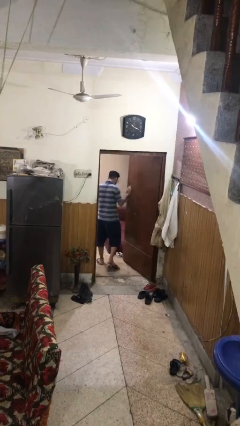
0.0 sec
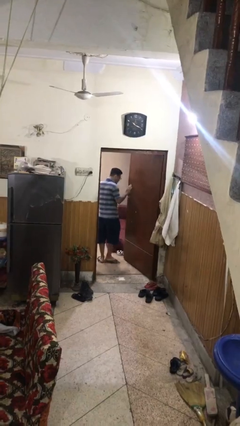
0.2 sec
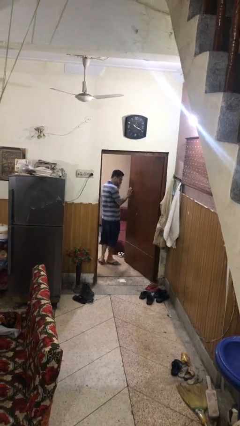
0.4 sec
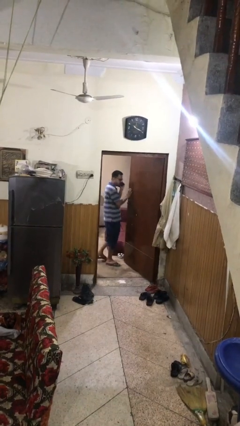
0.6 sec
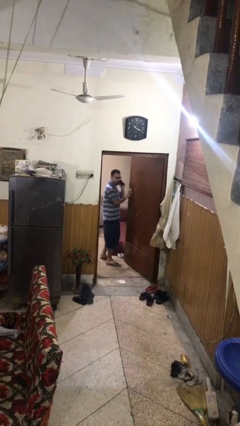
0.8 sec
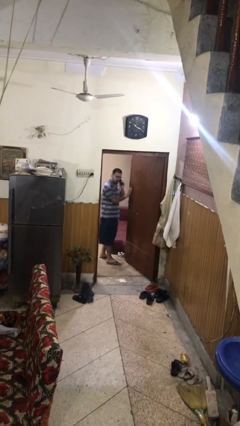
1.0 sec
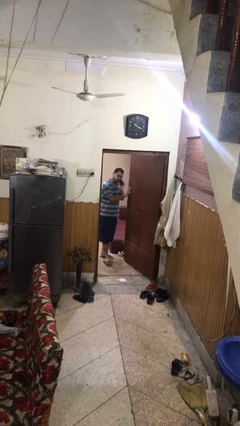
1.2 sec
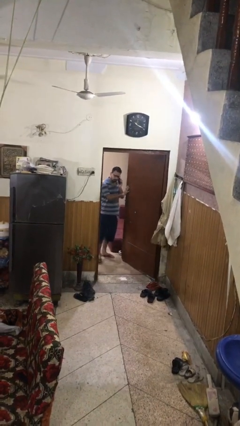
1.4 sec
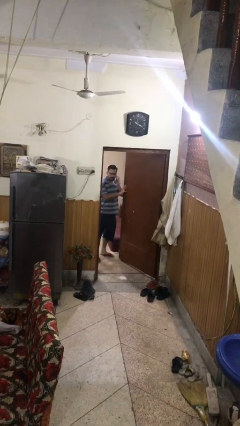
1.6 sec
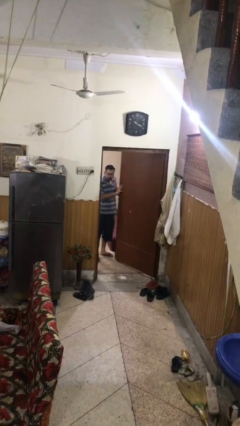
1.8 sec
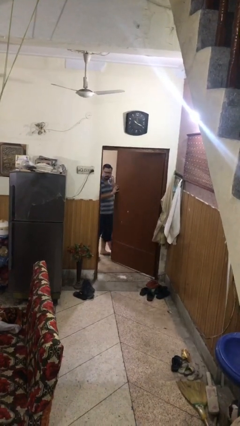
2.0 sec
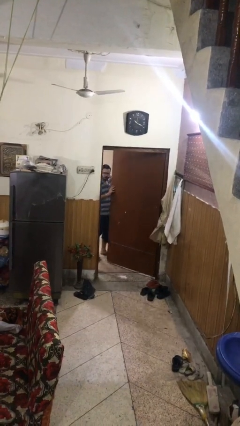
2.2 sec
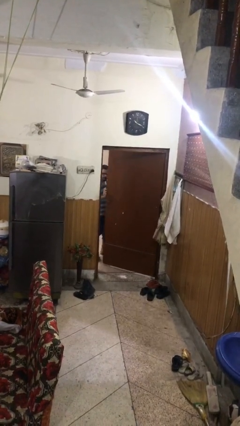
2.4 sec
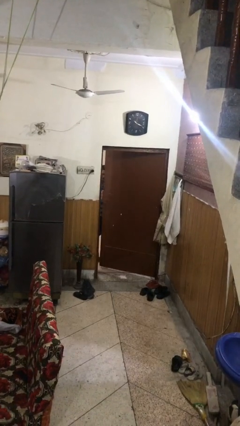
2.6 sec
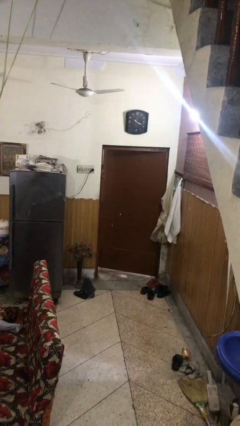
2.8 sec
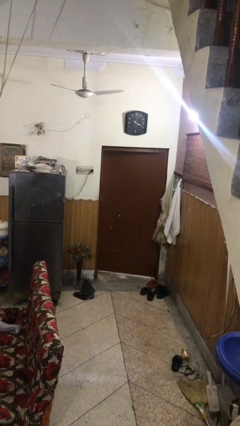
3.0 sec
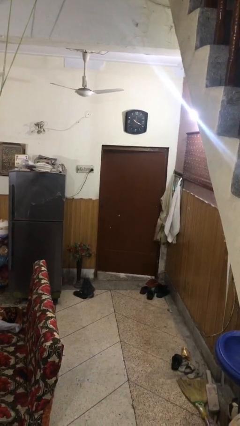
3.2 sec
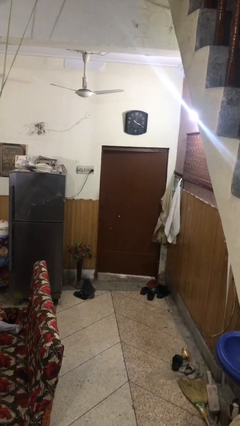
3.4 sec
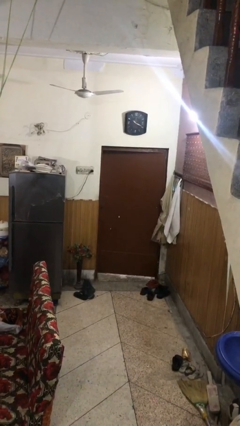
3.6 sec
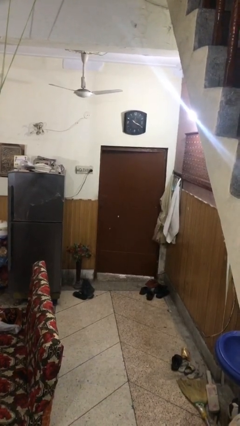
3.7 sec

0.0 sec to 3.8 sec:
person closes facility door

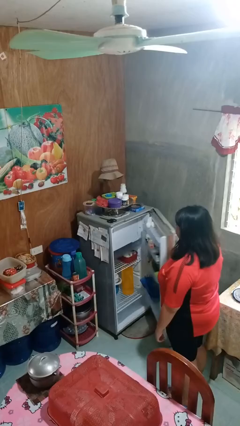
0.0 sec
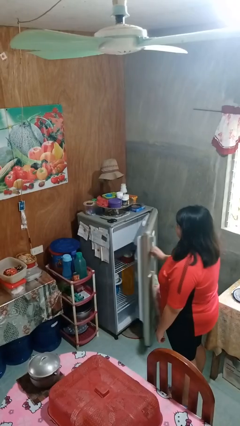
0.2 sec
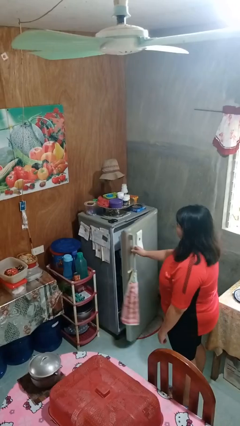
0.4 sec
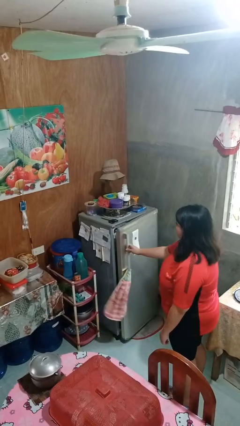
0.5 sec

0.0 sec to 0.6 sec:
person closes refrigerator

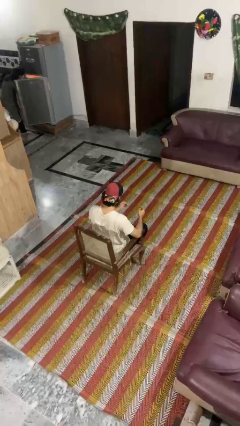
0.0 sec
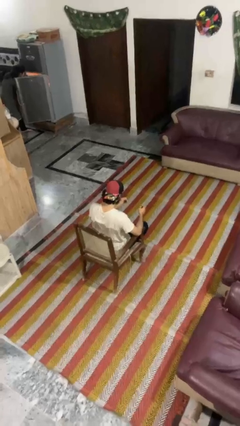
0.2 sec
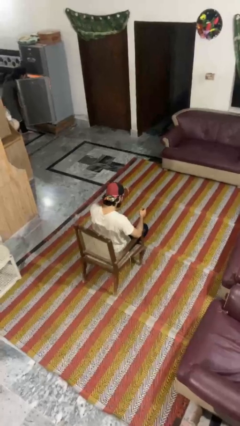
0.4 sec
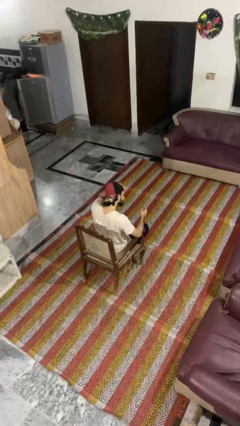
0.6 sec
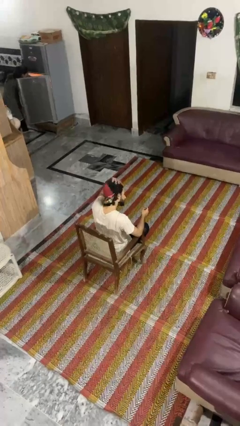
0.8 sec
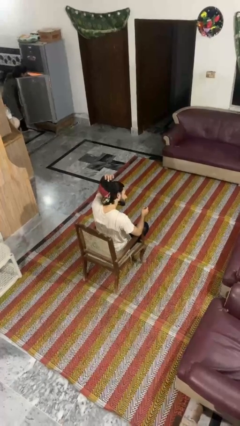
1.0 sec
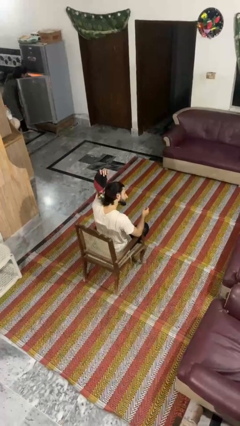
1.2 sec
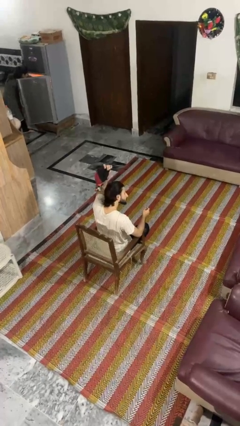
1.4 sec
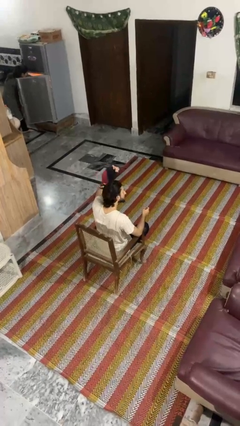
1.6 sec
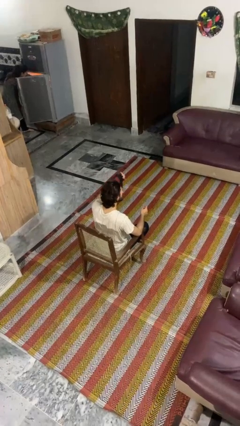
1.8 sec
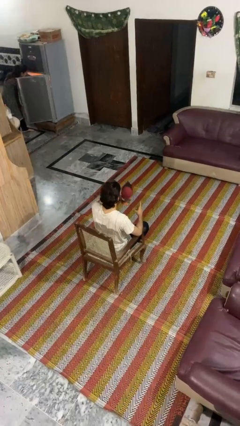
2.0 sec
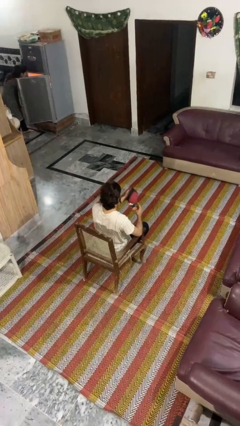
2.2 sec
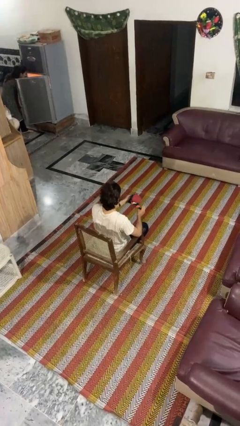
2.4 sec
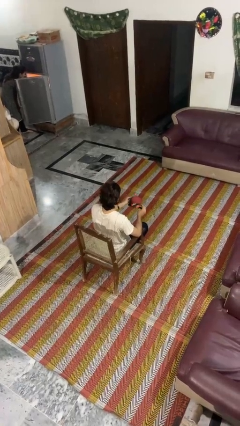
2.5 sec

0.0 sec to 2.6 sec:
person takes off hat

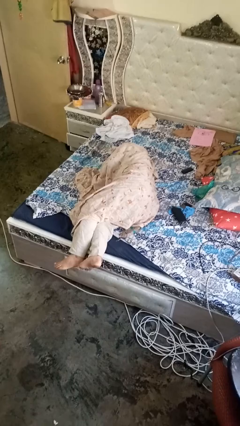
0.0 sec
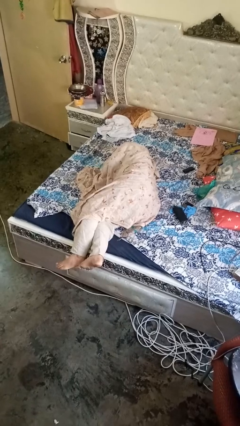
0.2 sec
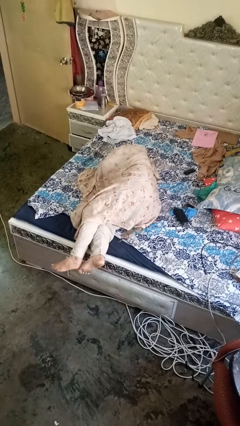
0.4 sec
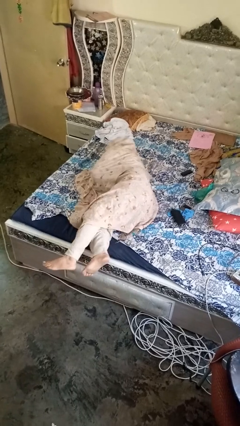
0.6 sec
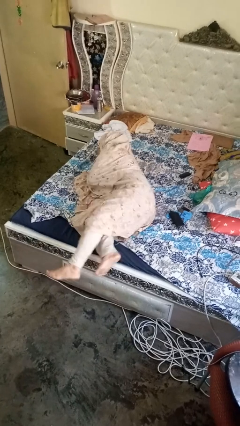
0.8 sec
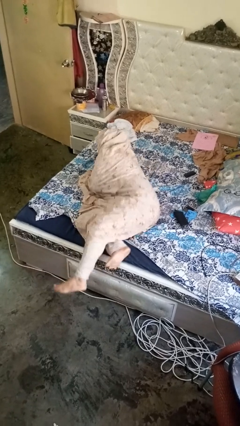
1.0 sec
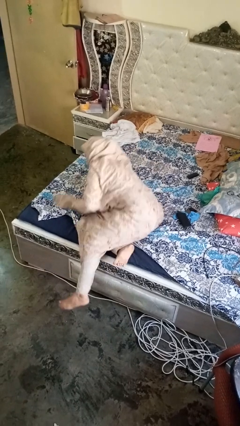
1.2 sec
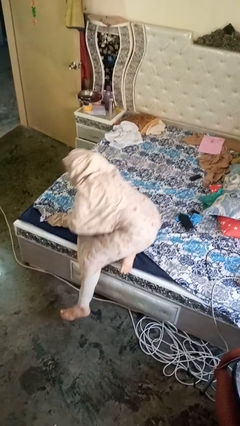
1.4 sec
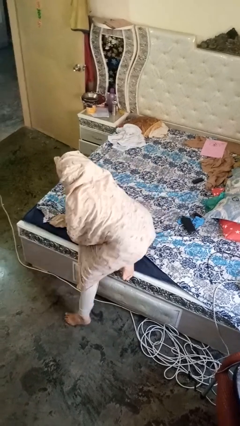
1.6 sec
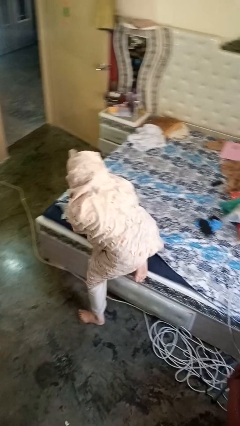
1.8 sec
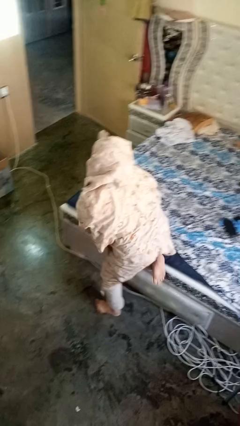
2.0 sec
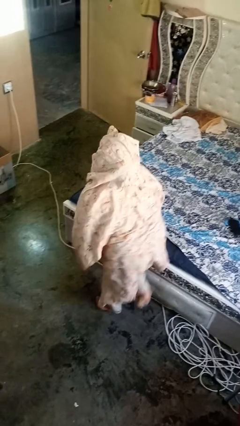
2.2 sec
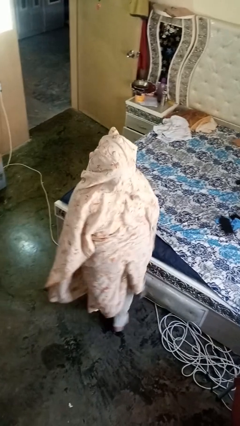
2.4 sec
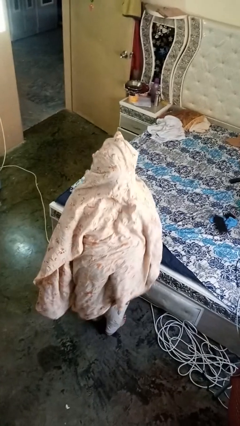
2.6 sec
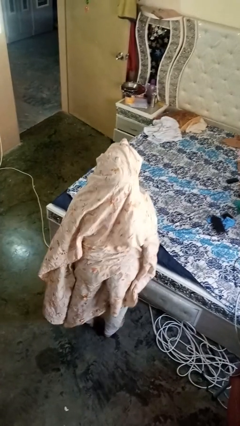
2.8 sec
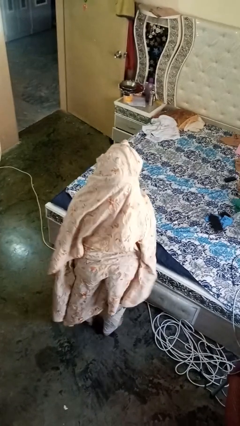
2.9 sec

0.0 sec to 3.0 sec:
person stands up

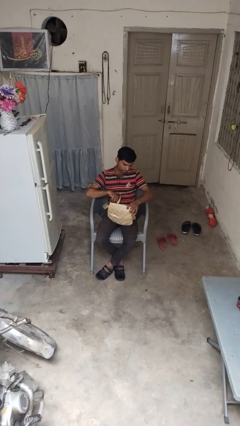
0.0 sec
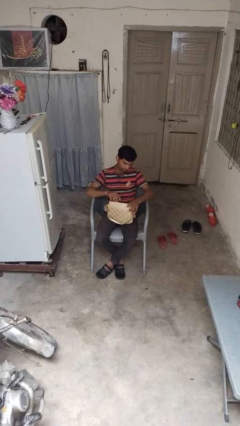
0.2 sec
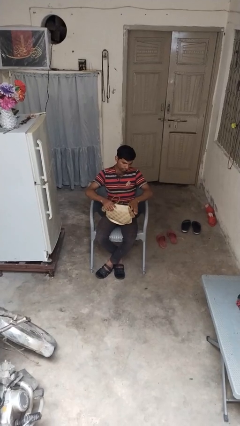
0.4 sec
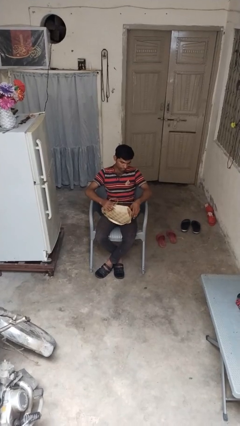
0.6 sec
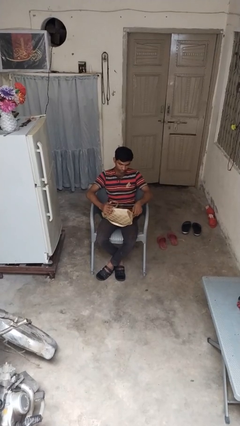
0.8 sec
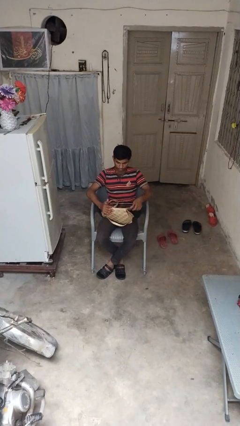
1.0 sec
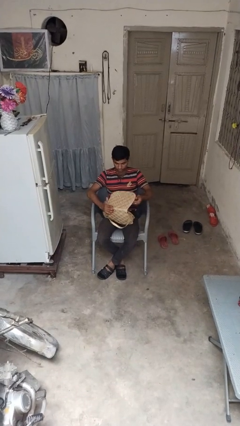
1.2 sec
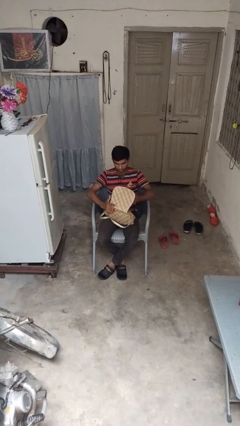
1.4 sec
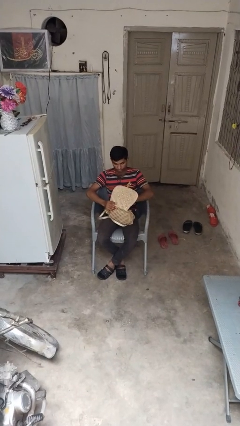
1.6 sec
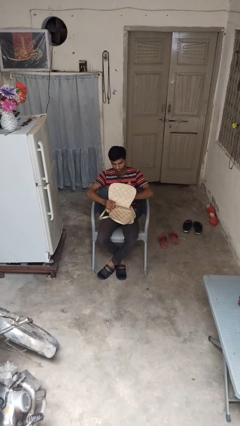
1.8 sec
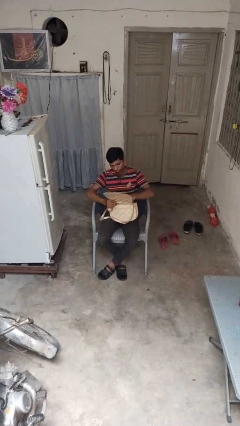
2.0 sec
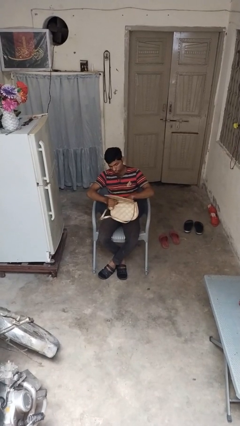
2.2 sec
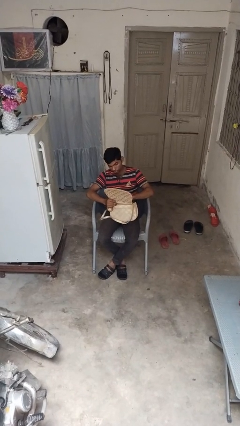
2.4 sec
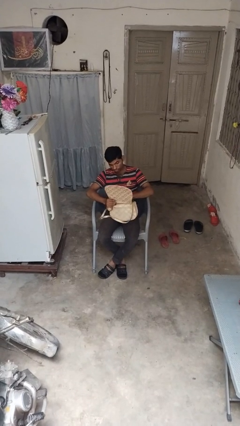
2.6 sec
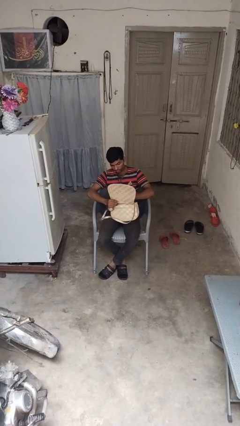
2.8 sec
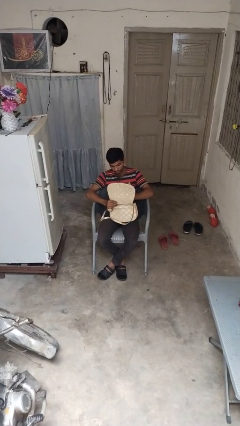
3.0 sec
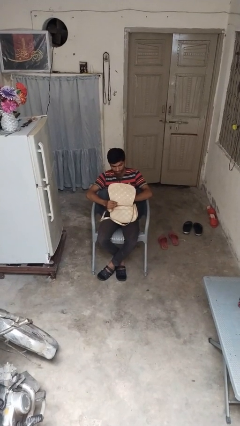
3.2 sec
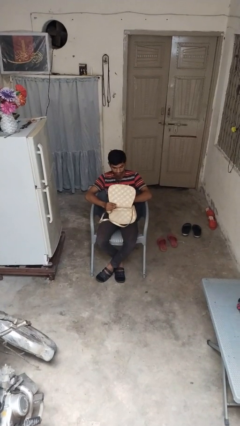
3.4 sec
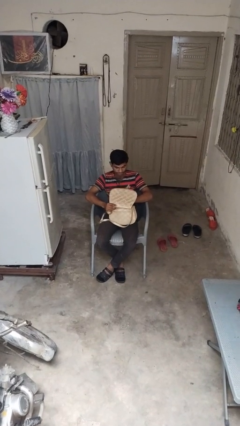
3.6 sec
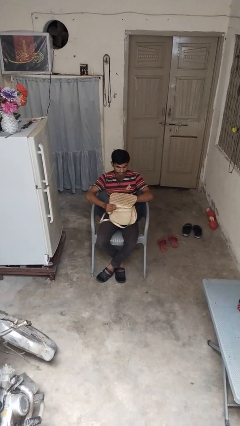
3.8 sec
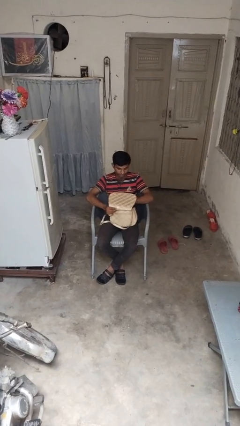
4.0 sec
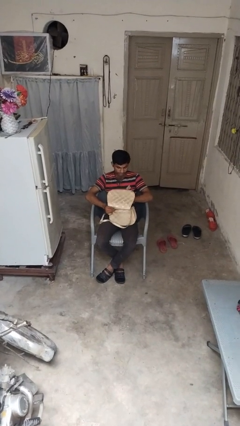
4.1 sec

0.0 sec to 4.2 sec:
person searches in purse

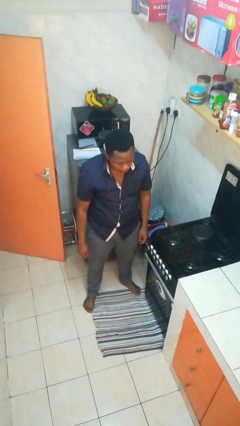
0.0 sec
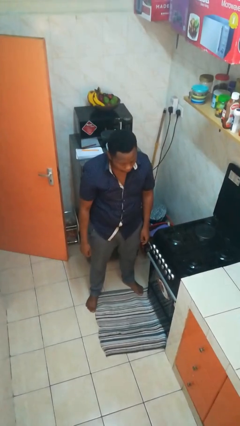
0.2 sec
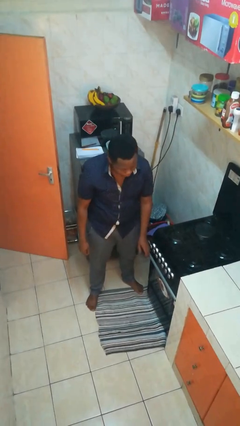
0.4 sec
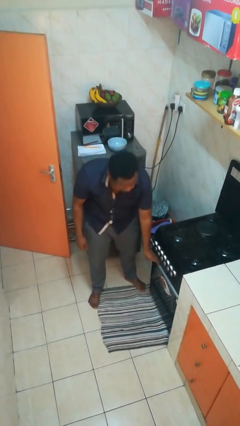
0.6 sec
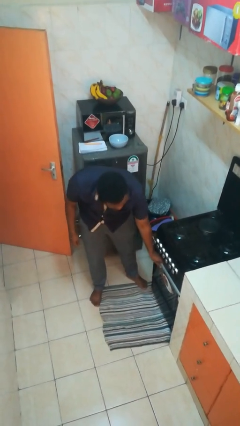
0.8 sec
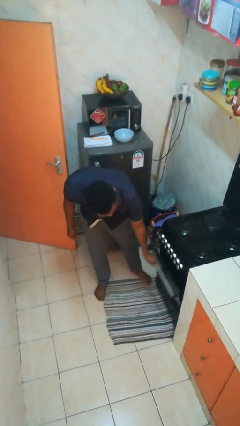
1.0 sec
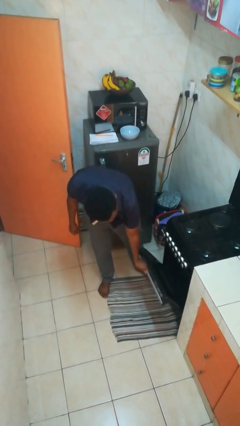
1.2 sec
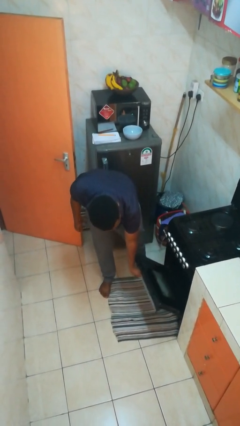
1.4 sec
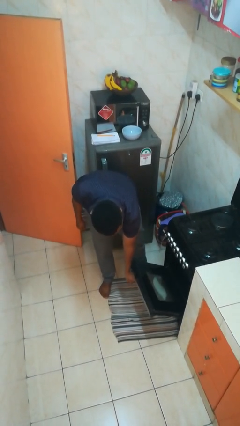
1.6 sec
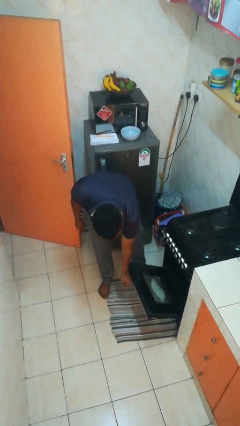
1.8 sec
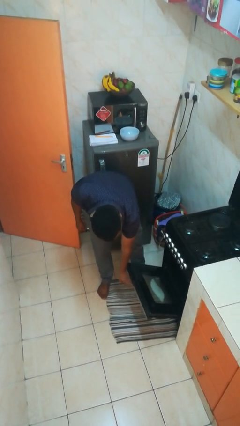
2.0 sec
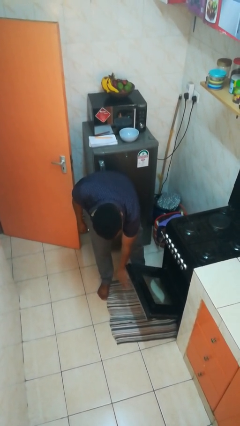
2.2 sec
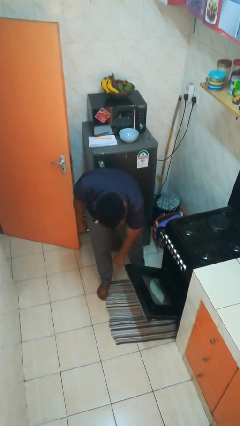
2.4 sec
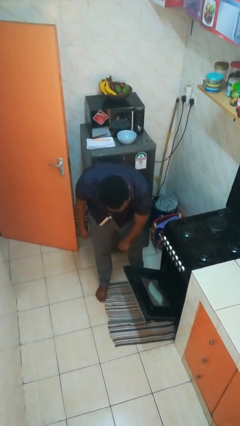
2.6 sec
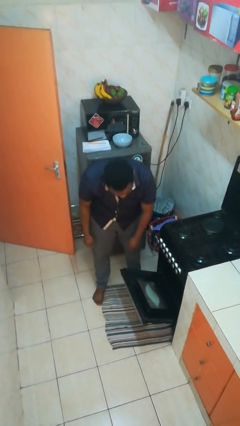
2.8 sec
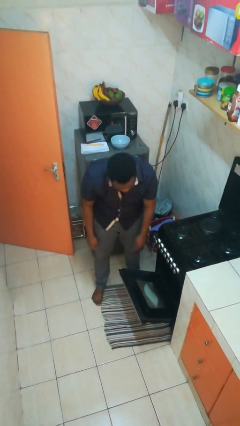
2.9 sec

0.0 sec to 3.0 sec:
person opens oven door
